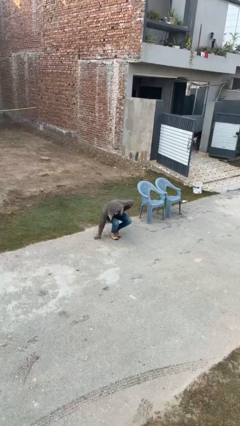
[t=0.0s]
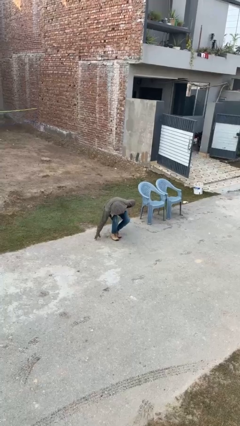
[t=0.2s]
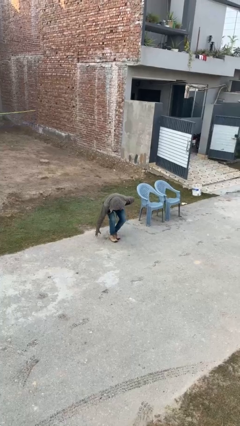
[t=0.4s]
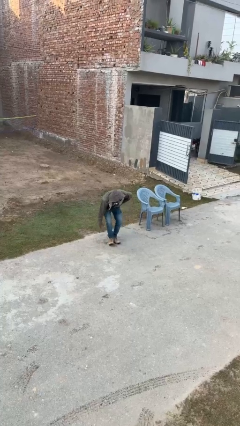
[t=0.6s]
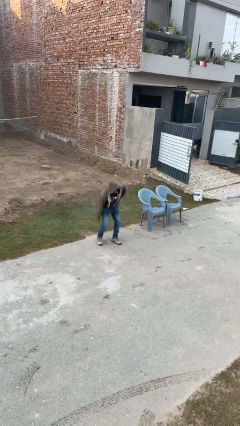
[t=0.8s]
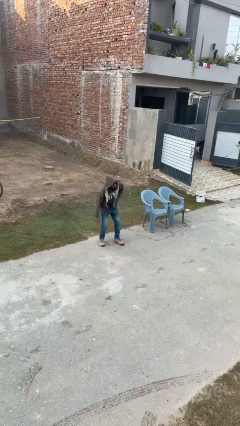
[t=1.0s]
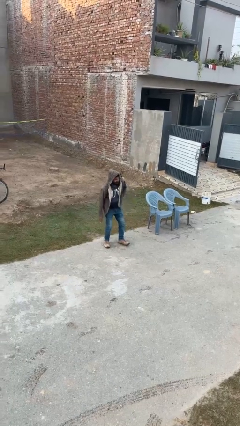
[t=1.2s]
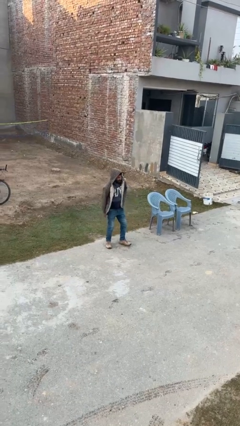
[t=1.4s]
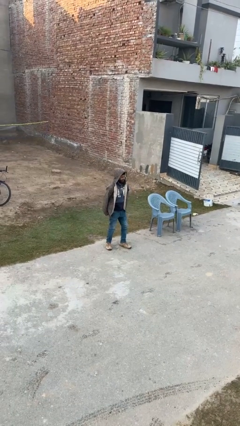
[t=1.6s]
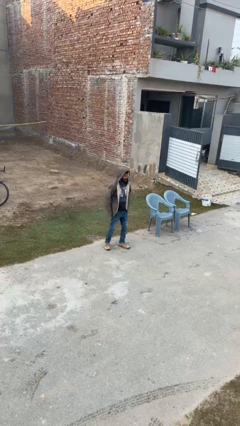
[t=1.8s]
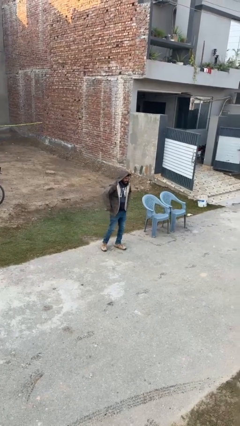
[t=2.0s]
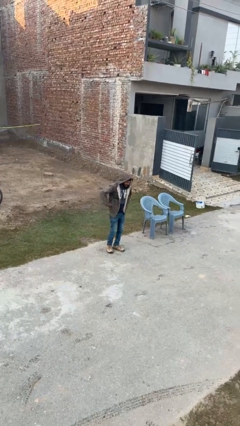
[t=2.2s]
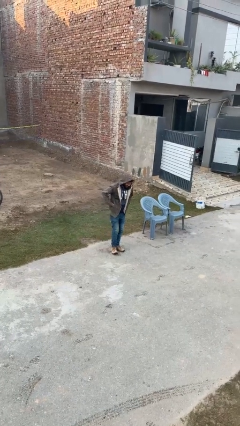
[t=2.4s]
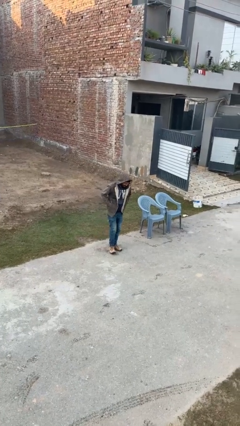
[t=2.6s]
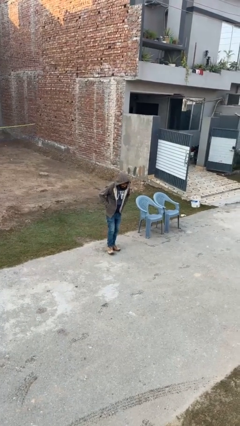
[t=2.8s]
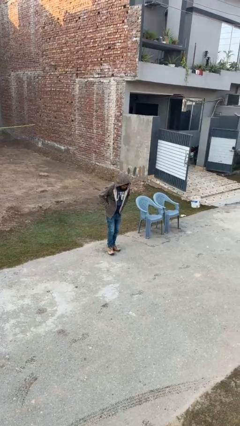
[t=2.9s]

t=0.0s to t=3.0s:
person stands up

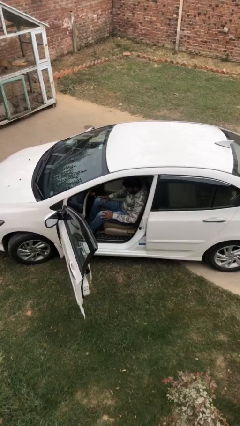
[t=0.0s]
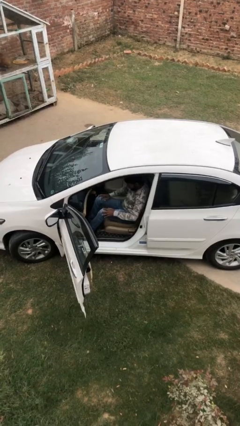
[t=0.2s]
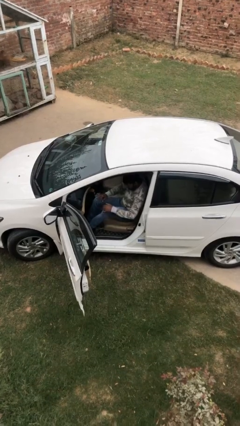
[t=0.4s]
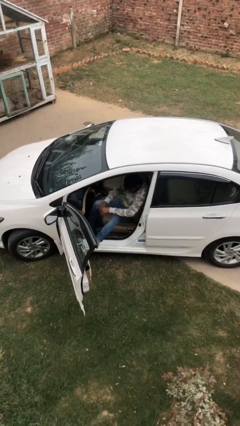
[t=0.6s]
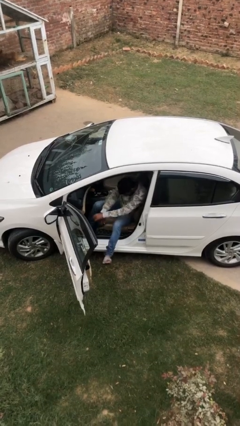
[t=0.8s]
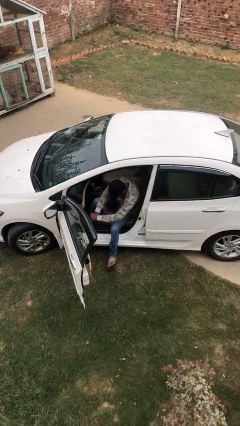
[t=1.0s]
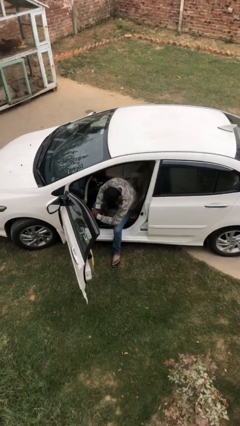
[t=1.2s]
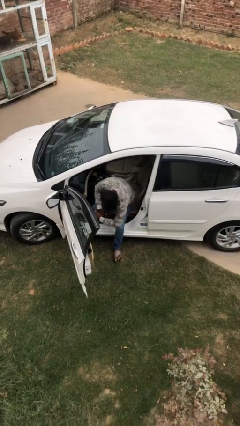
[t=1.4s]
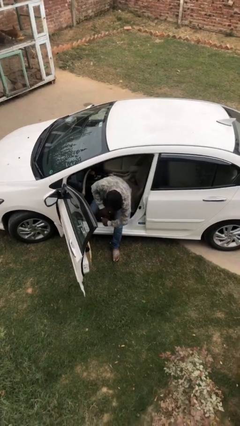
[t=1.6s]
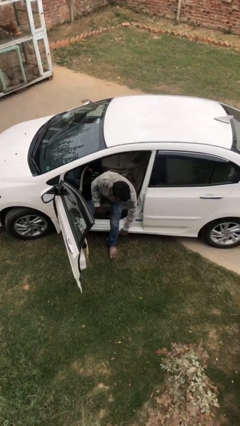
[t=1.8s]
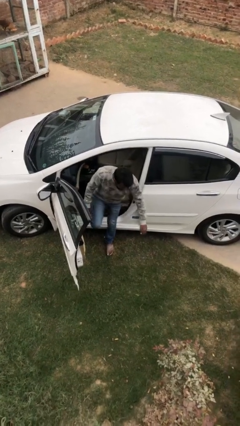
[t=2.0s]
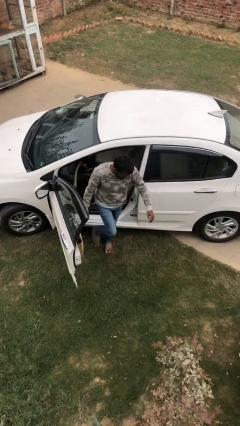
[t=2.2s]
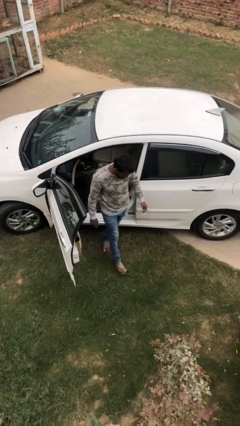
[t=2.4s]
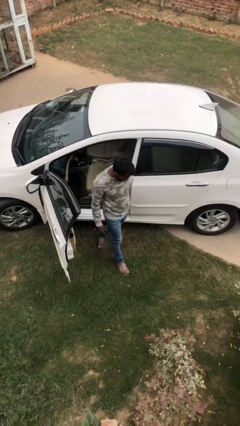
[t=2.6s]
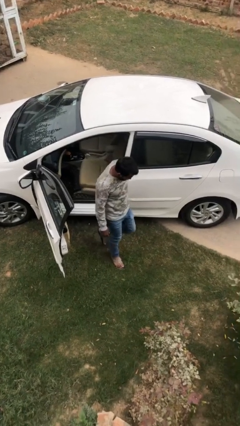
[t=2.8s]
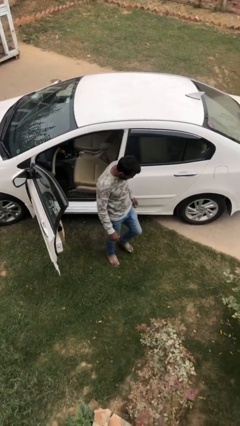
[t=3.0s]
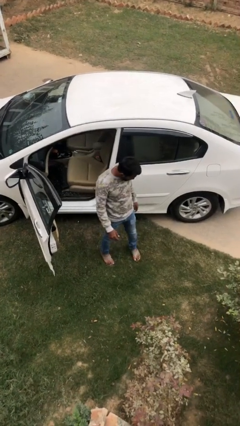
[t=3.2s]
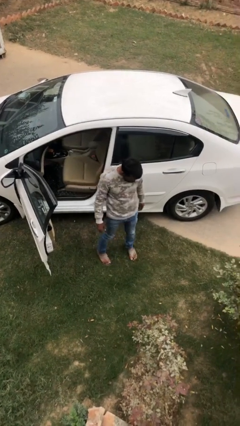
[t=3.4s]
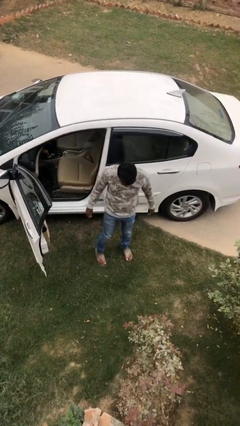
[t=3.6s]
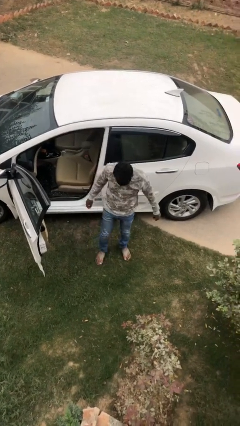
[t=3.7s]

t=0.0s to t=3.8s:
person exits car

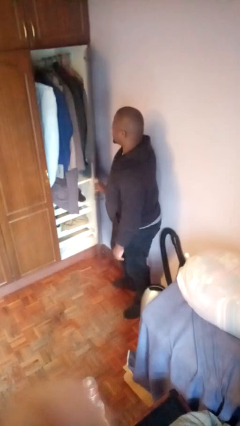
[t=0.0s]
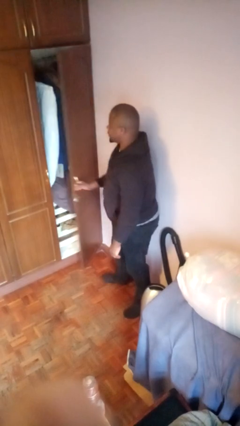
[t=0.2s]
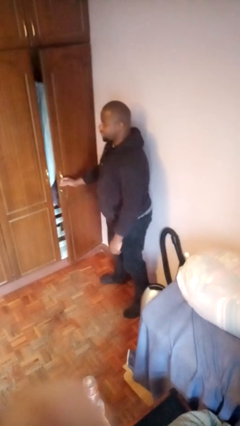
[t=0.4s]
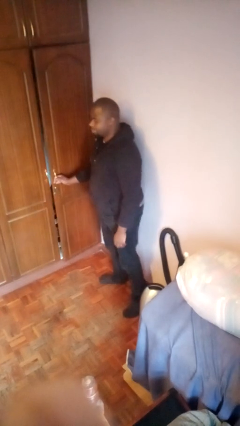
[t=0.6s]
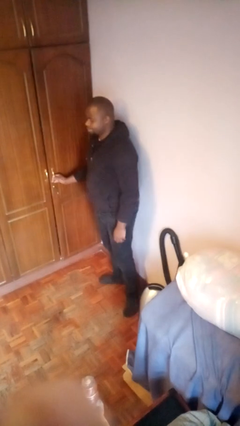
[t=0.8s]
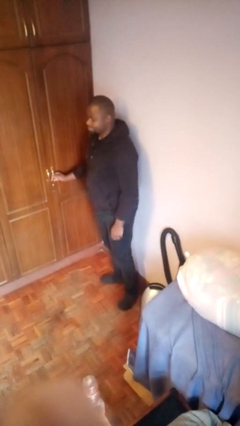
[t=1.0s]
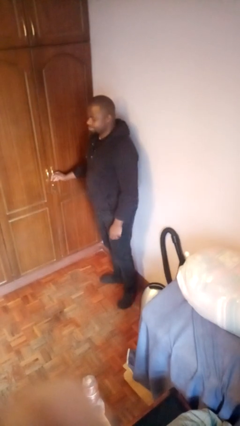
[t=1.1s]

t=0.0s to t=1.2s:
person closes closet door

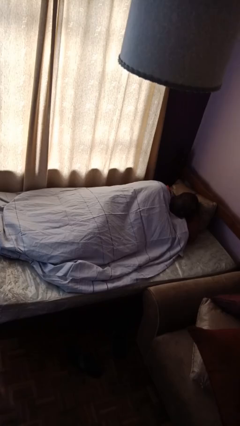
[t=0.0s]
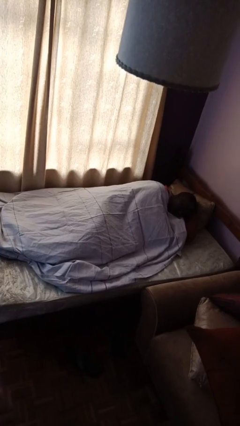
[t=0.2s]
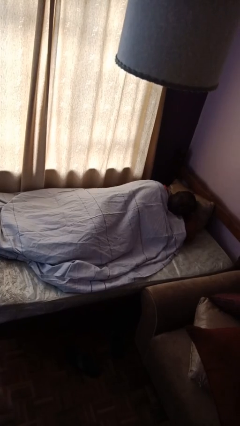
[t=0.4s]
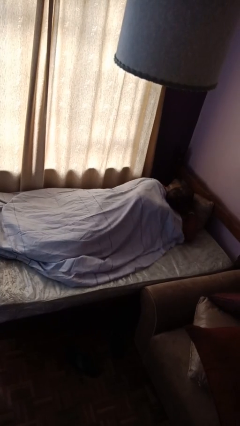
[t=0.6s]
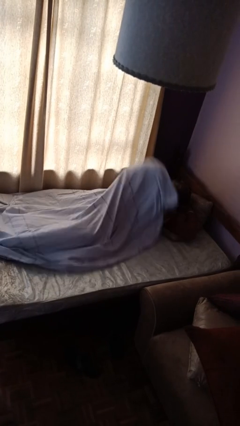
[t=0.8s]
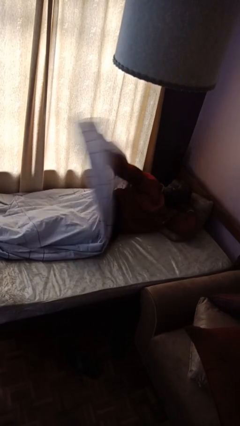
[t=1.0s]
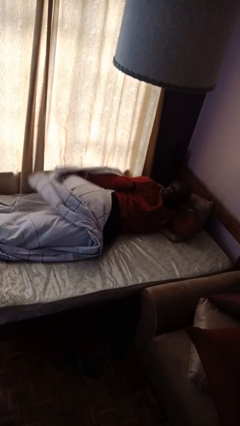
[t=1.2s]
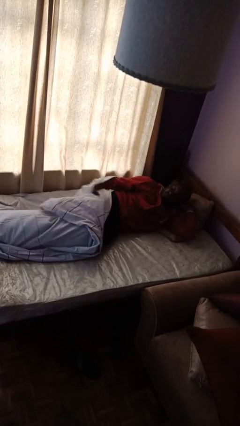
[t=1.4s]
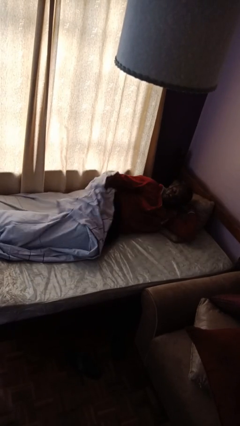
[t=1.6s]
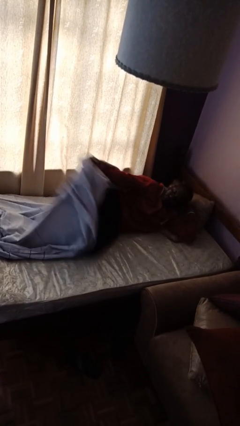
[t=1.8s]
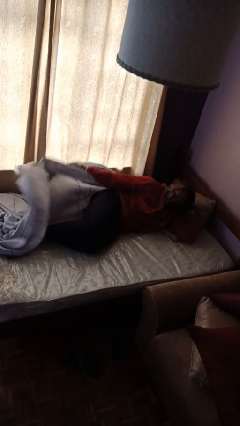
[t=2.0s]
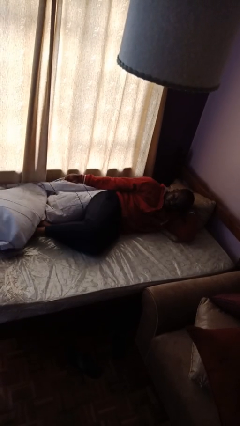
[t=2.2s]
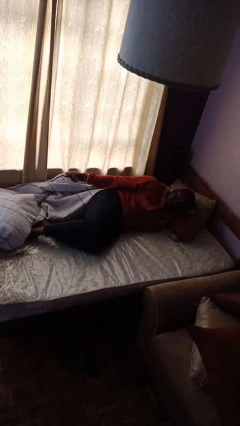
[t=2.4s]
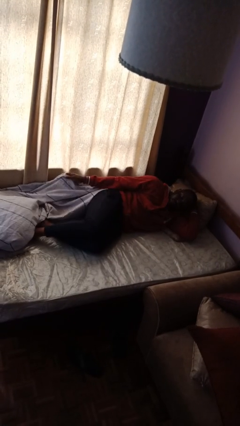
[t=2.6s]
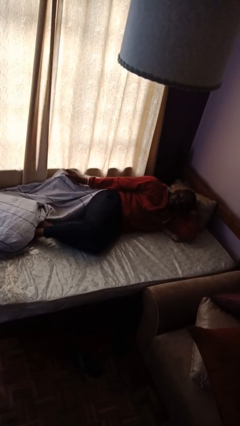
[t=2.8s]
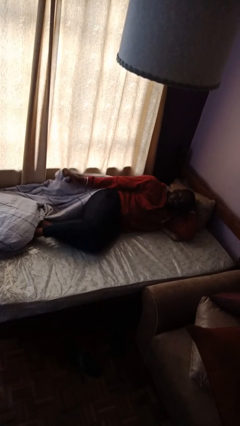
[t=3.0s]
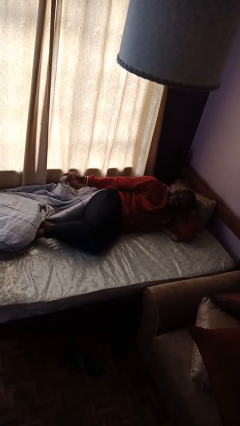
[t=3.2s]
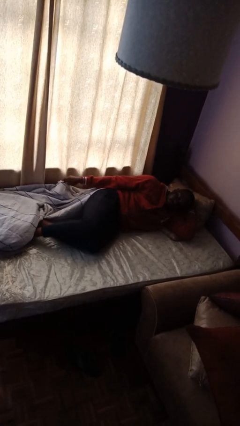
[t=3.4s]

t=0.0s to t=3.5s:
person uncovers with bedsheets

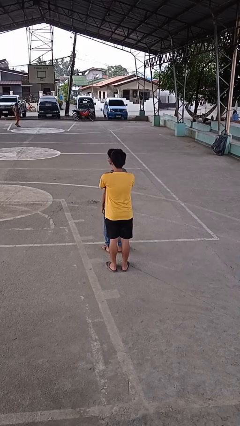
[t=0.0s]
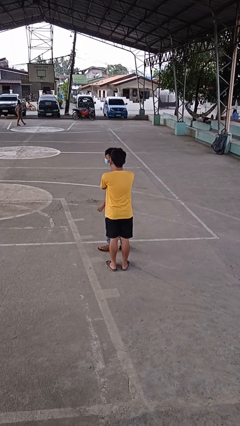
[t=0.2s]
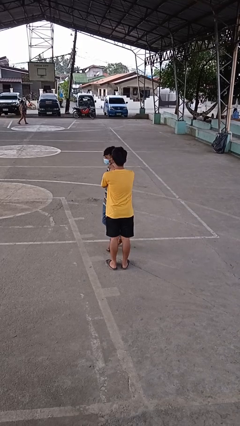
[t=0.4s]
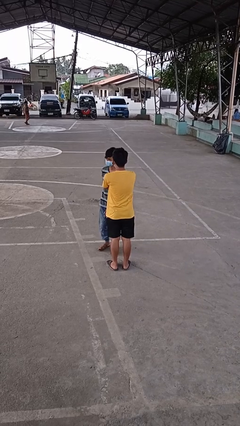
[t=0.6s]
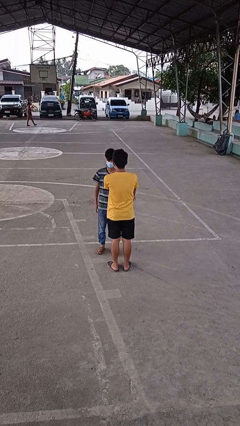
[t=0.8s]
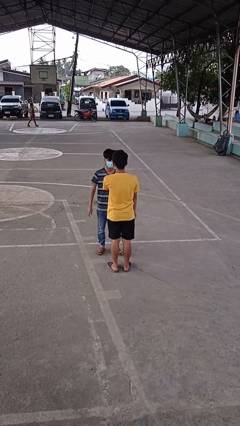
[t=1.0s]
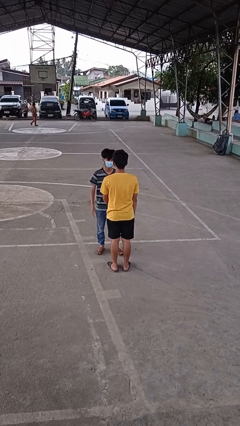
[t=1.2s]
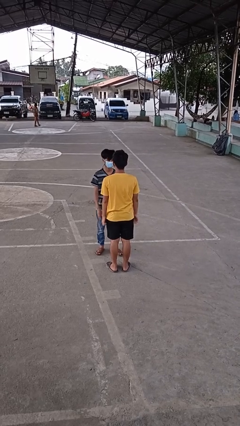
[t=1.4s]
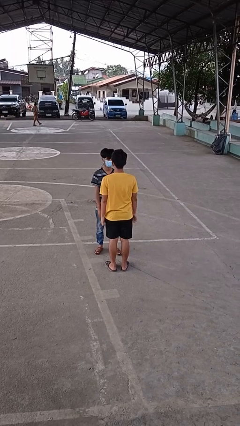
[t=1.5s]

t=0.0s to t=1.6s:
person spins person around

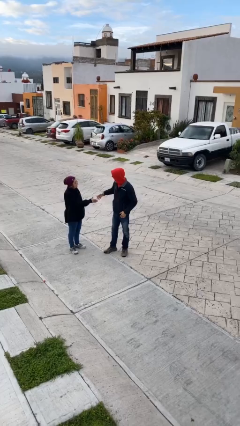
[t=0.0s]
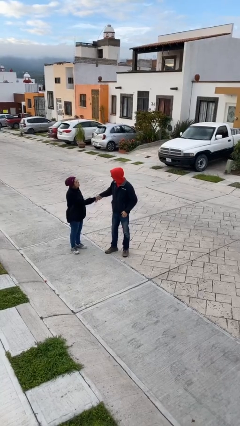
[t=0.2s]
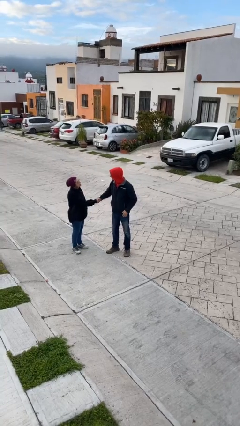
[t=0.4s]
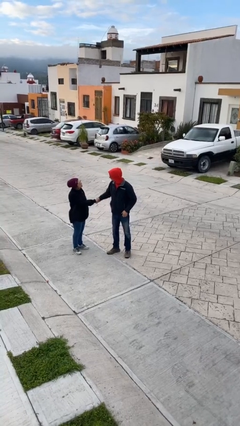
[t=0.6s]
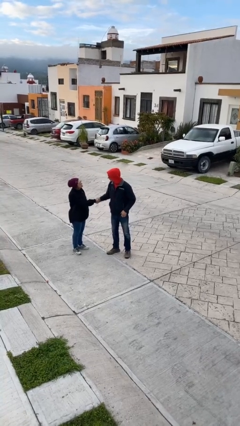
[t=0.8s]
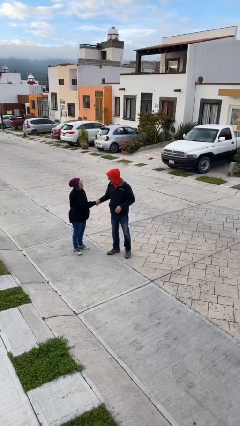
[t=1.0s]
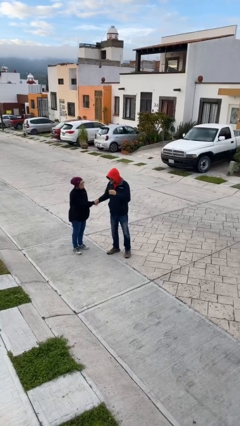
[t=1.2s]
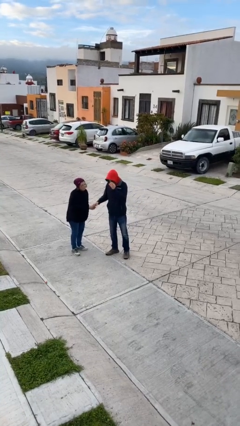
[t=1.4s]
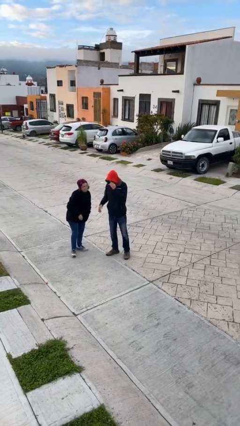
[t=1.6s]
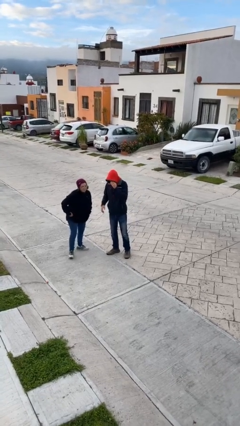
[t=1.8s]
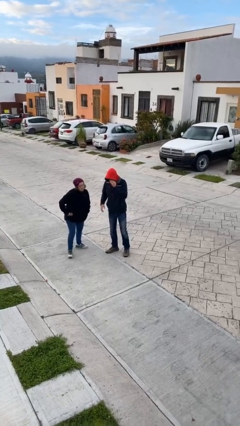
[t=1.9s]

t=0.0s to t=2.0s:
person shakes hand

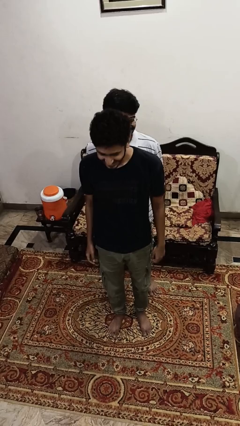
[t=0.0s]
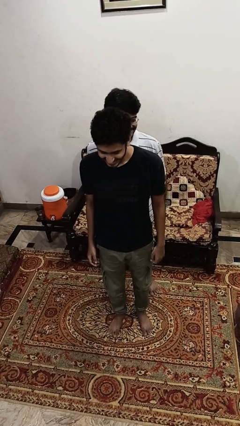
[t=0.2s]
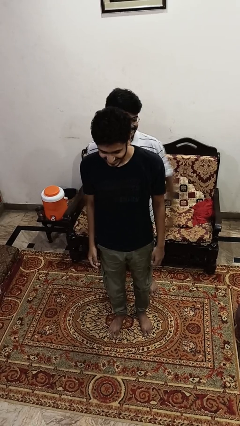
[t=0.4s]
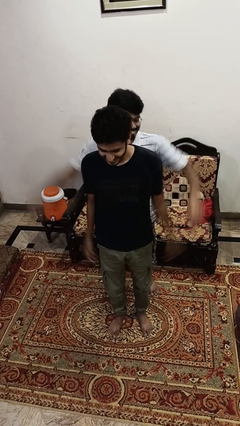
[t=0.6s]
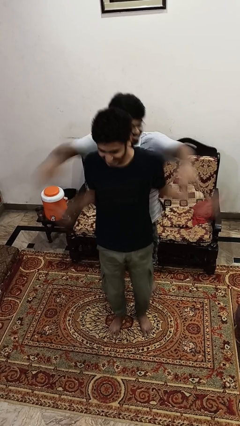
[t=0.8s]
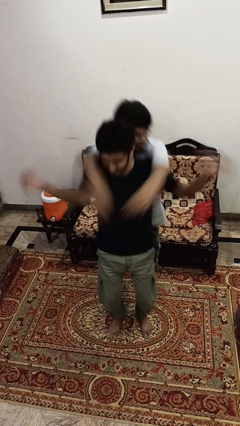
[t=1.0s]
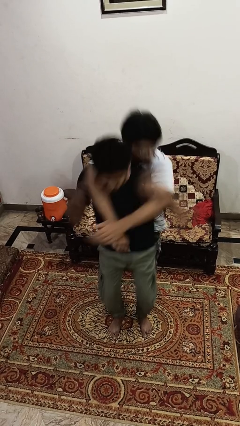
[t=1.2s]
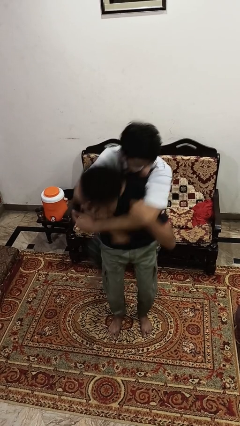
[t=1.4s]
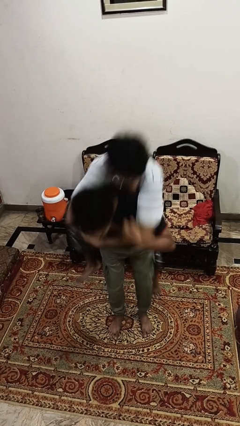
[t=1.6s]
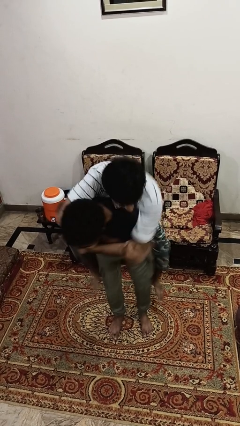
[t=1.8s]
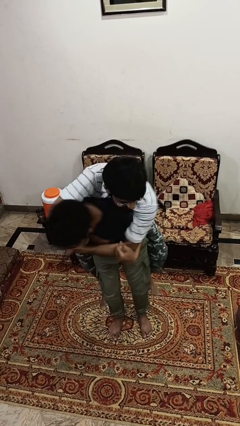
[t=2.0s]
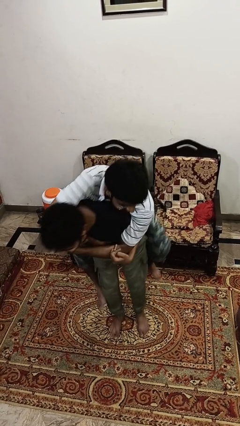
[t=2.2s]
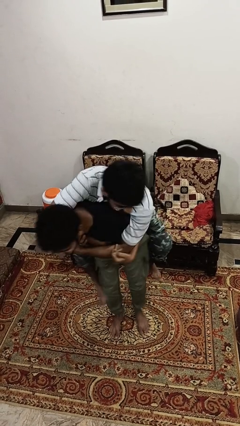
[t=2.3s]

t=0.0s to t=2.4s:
person carries person over shoulder
